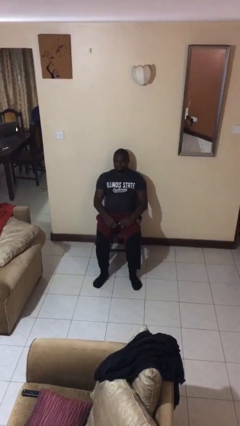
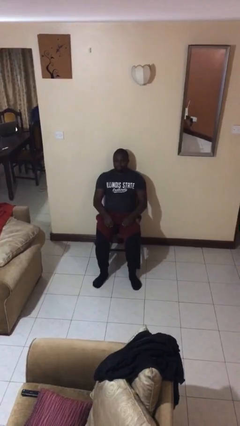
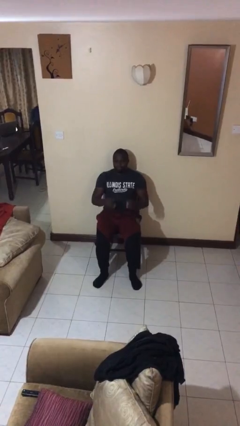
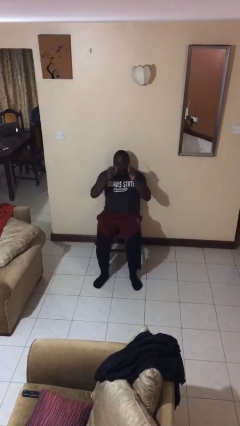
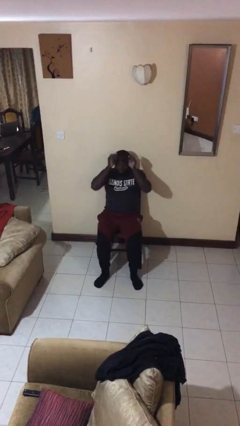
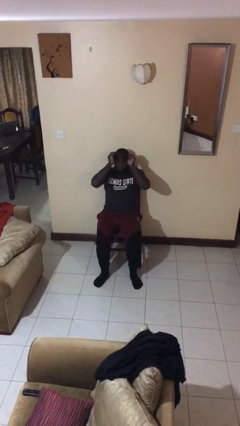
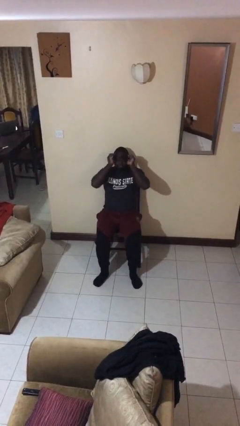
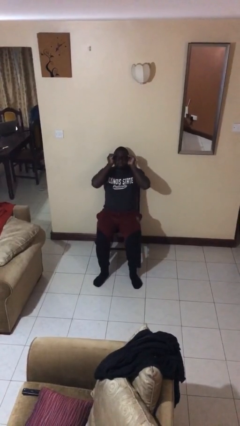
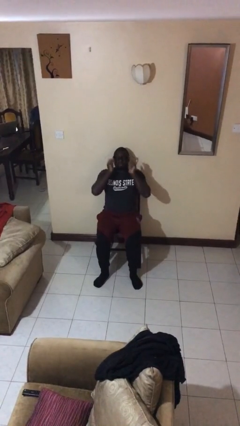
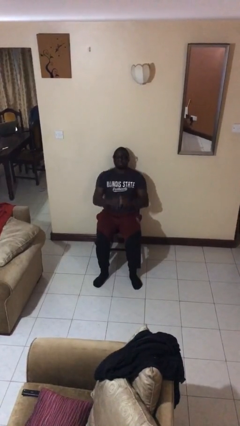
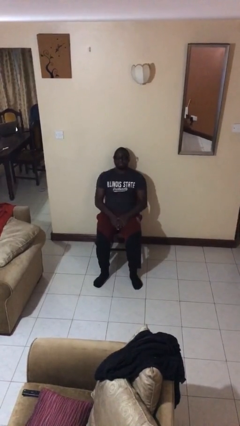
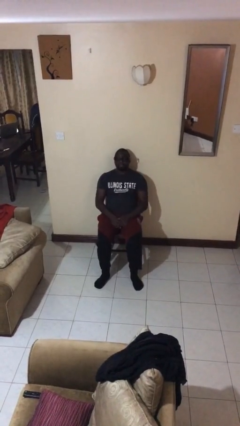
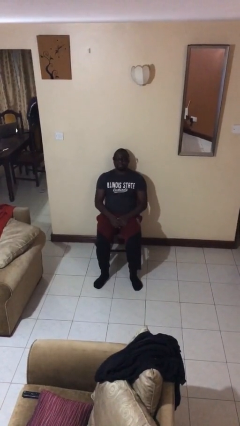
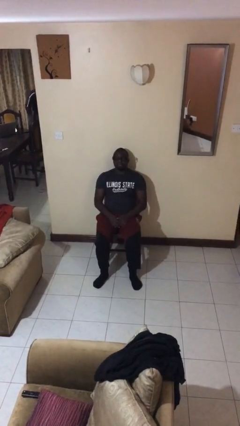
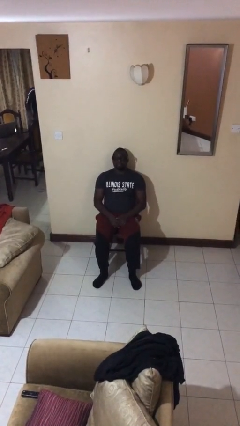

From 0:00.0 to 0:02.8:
person puts on glasses

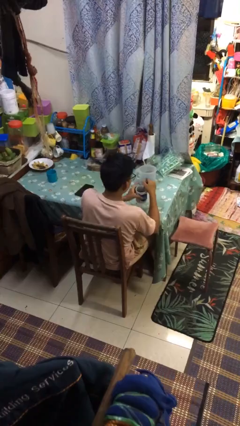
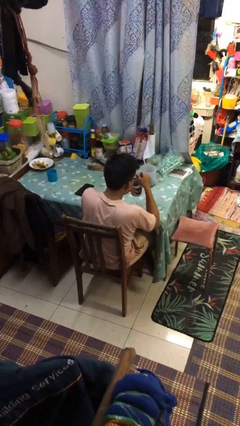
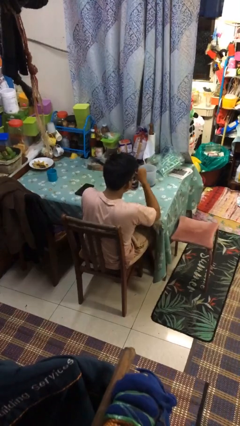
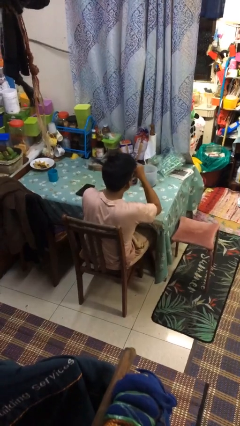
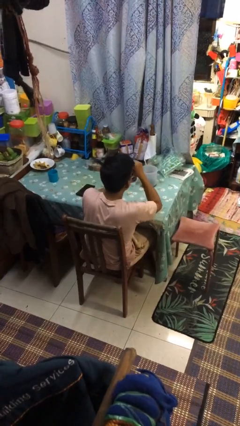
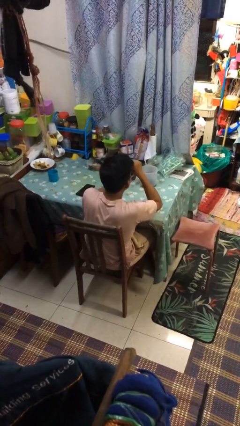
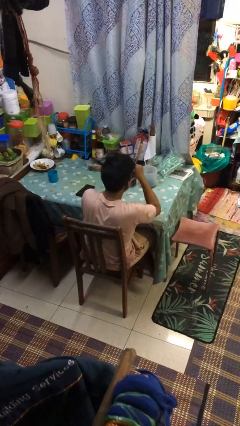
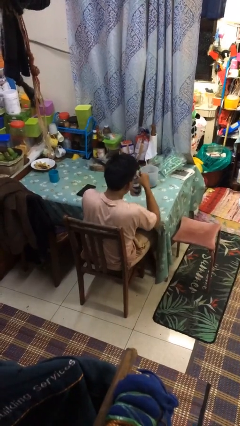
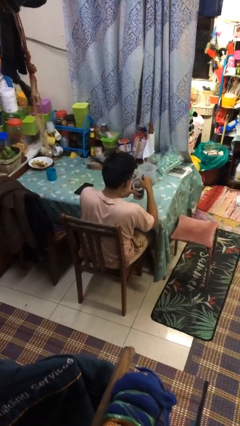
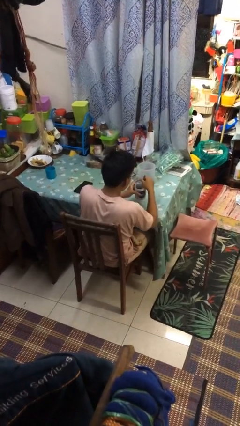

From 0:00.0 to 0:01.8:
person drinks from mug

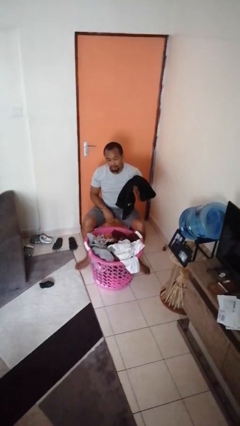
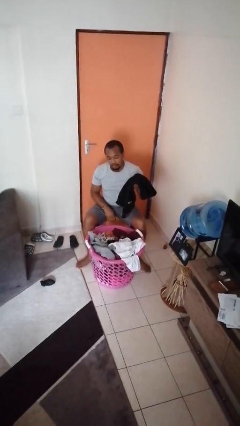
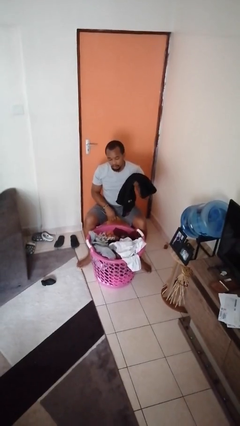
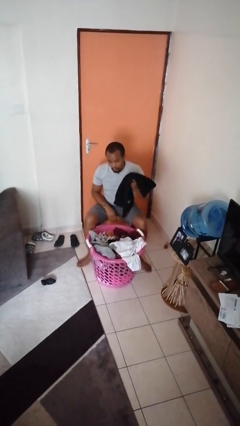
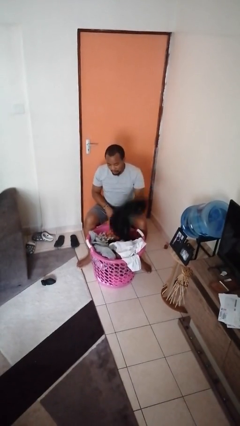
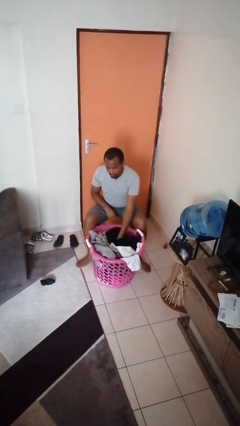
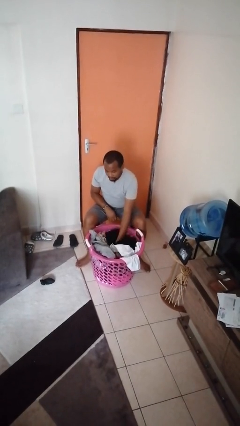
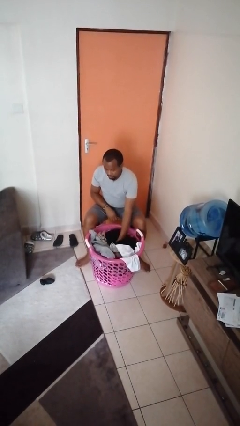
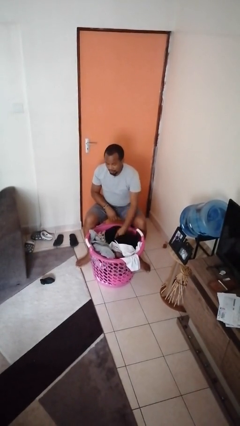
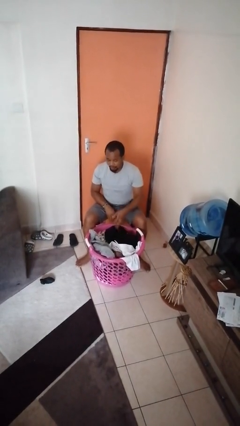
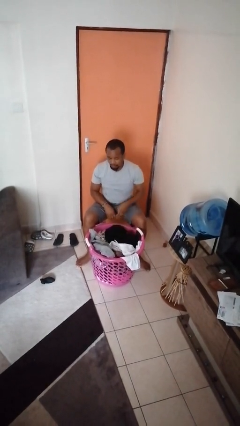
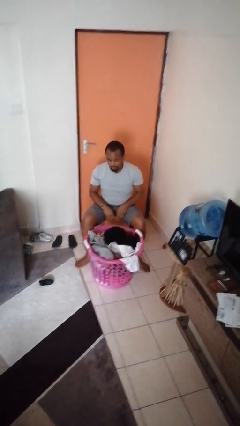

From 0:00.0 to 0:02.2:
person puts object into basket

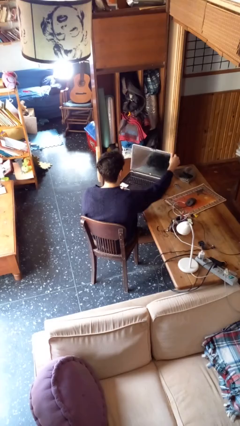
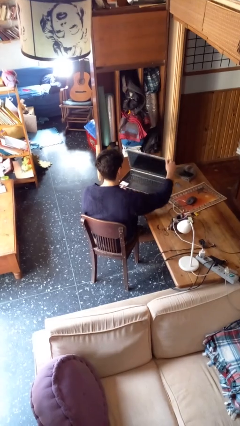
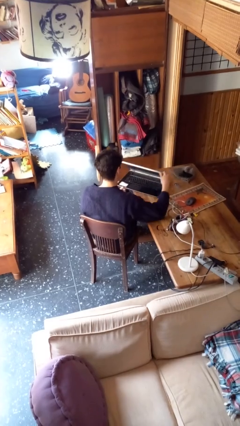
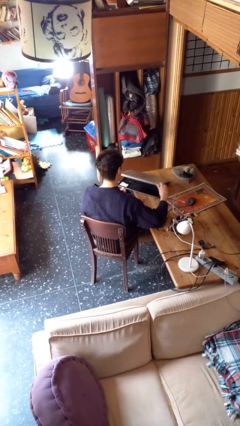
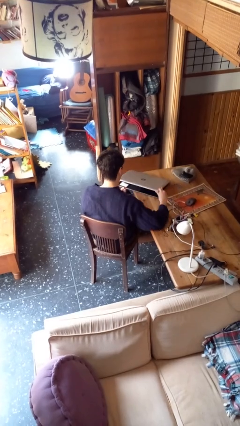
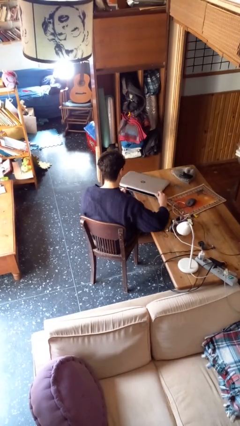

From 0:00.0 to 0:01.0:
person closes laptop

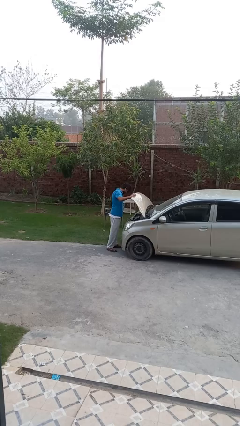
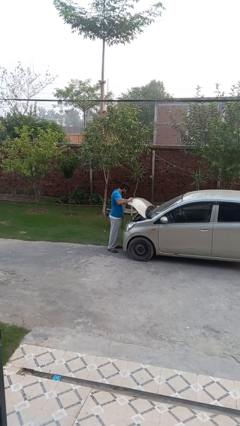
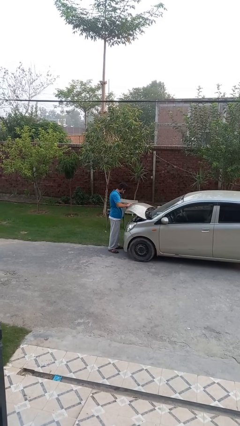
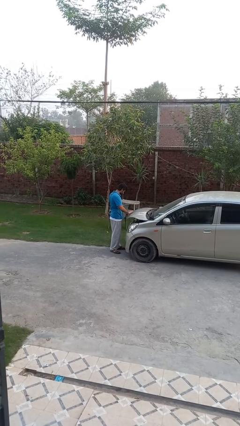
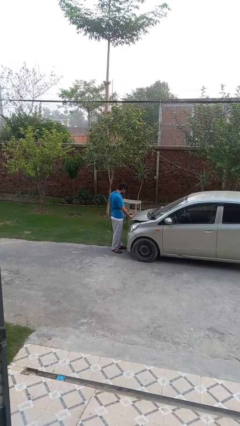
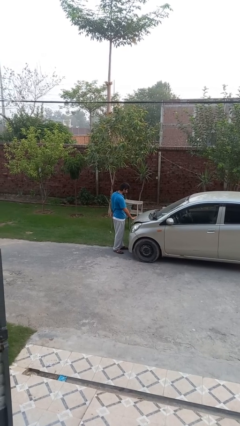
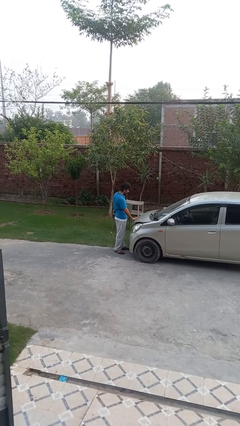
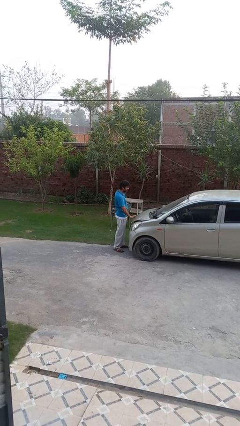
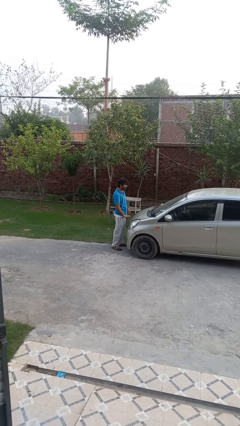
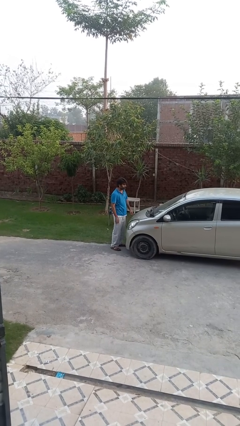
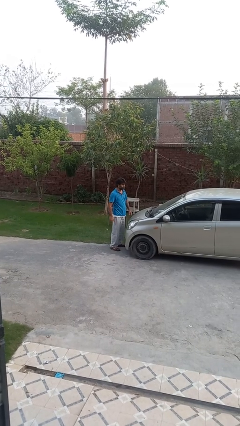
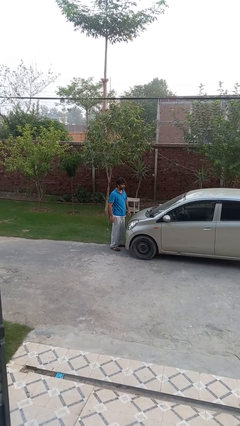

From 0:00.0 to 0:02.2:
person closes car hood

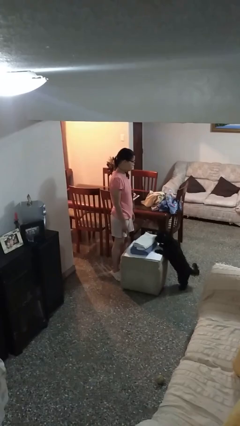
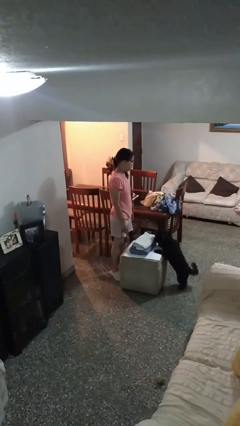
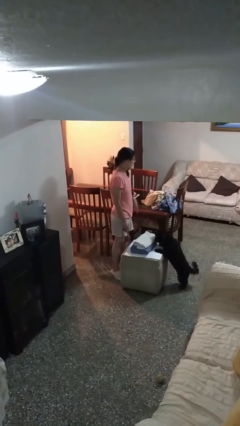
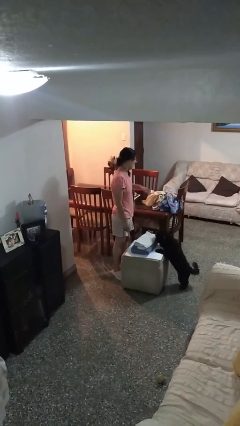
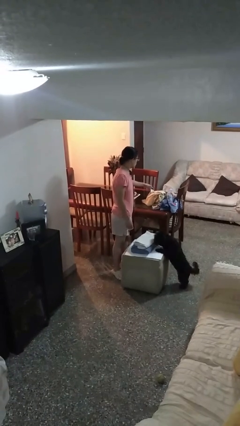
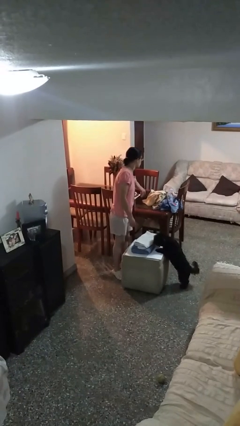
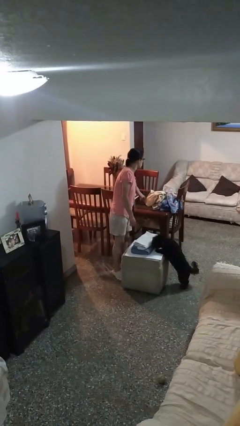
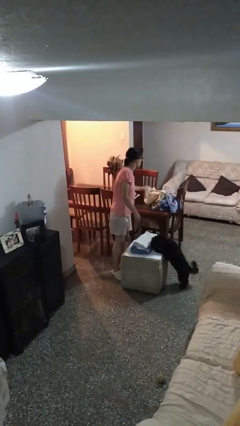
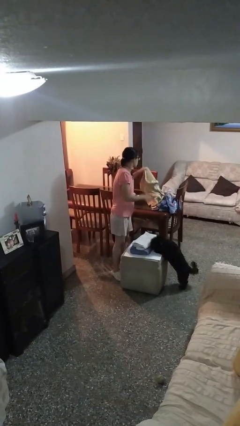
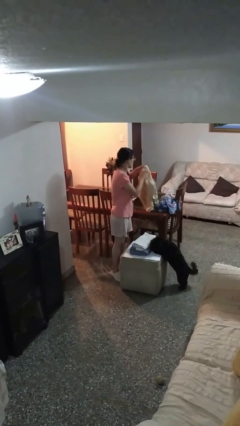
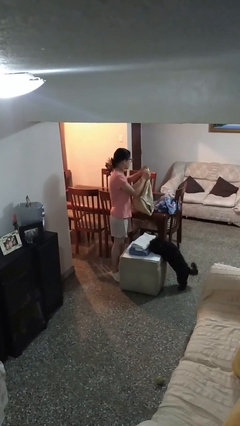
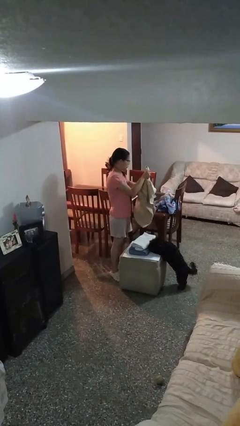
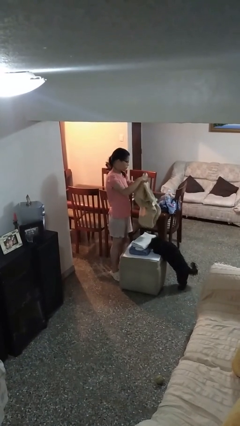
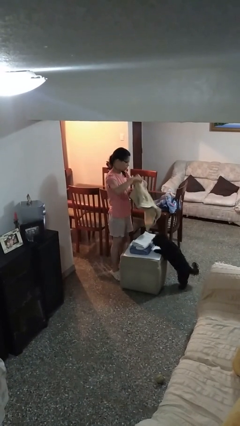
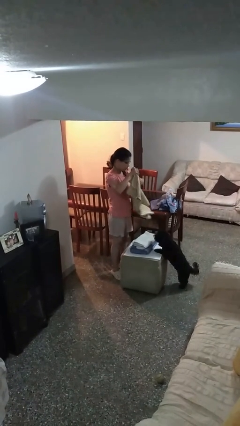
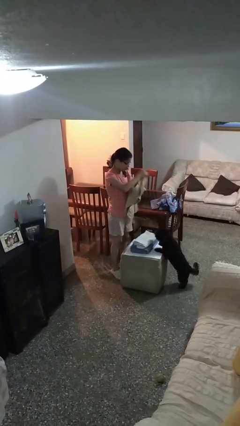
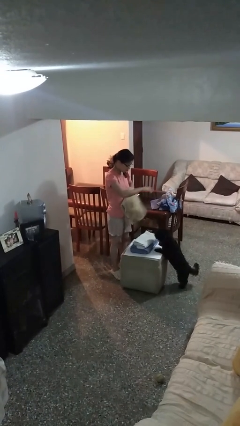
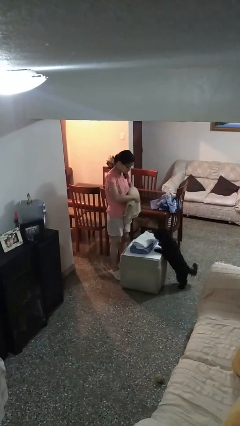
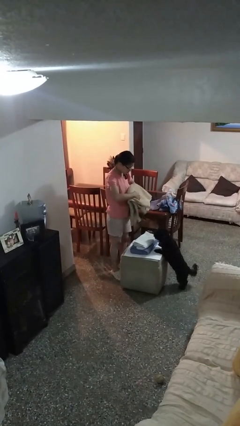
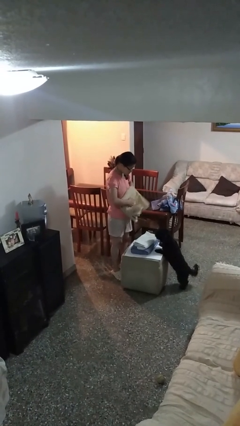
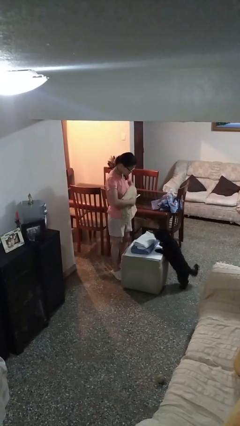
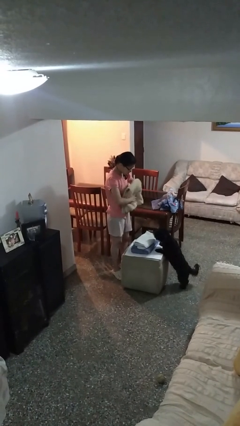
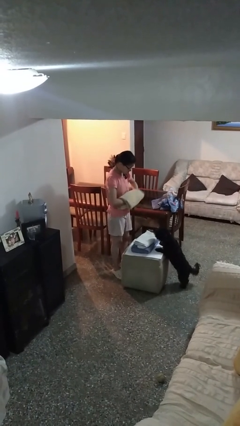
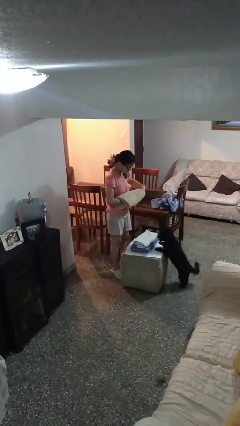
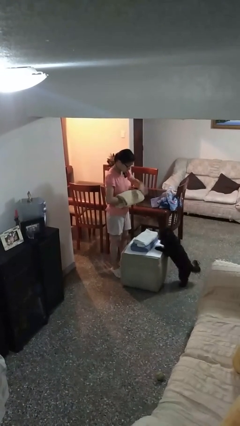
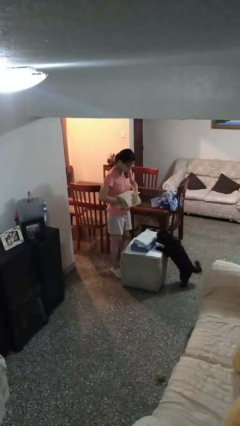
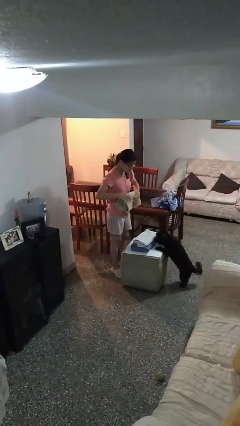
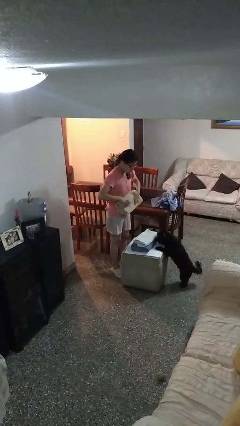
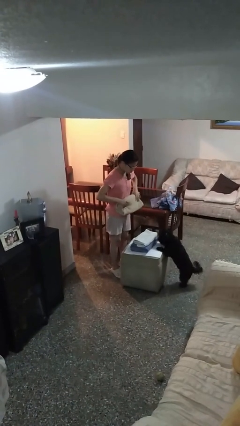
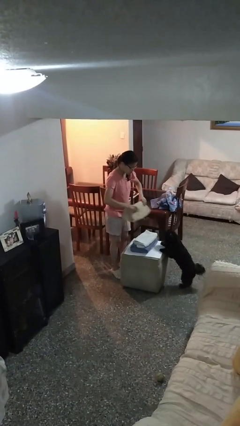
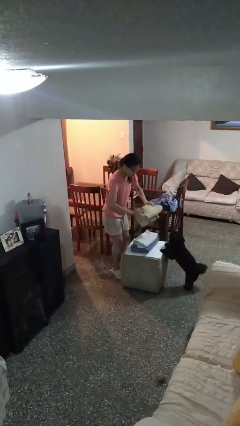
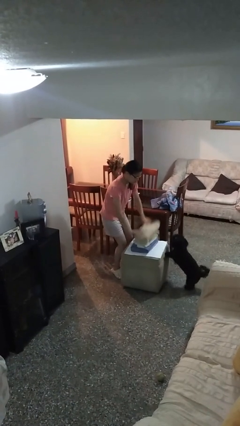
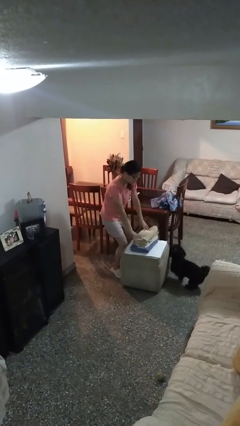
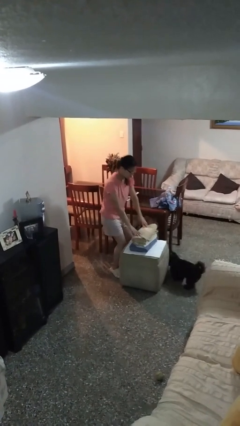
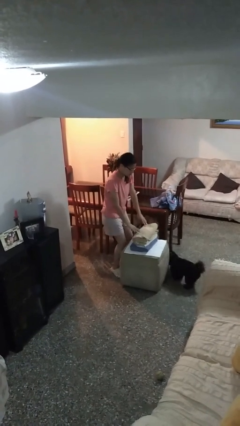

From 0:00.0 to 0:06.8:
person folds towel

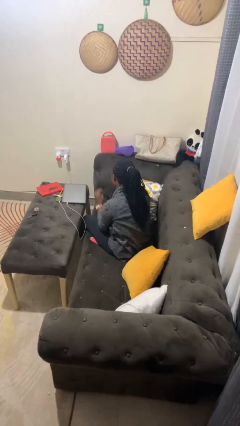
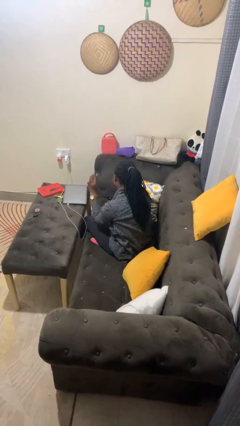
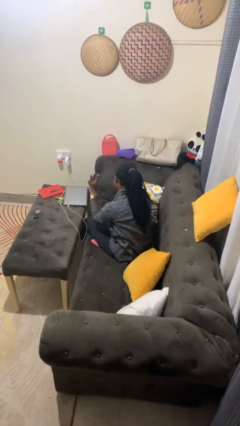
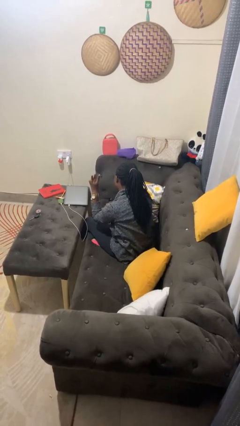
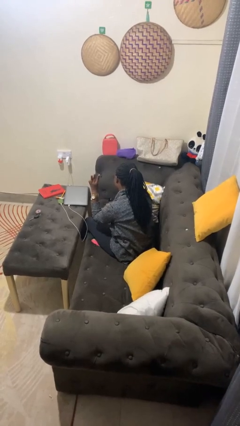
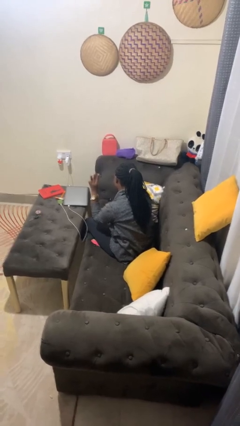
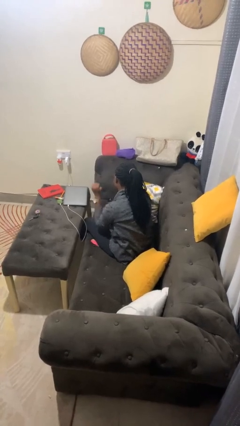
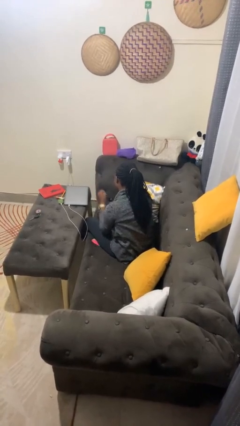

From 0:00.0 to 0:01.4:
person gestures number three
